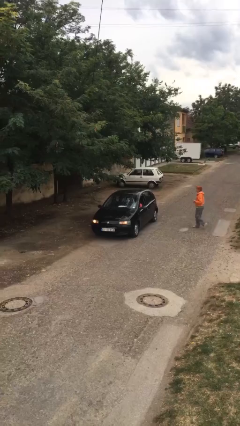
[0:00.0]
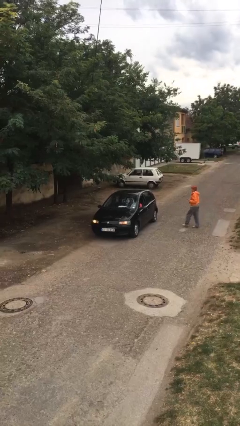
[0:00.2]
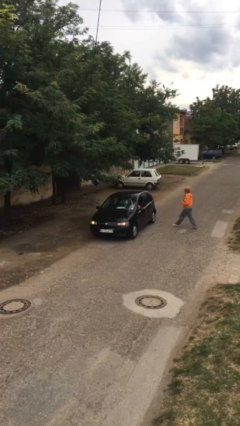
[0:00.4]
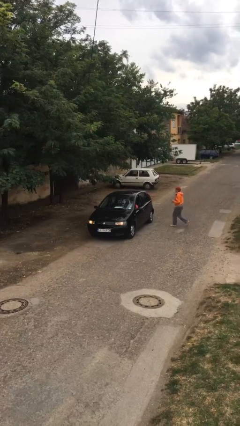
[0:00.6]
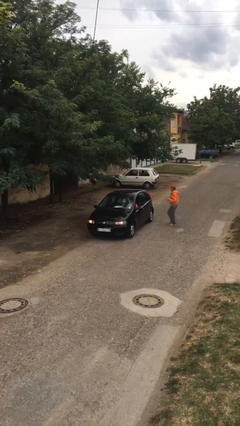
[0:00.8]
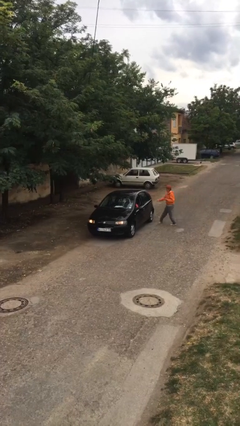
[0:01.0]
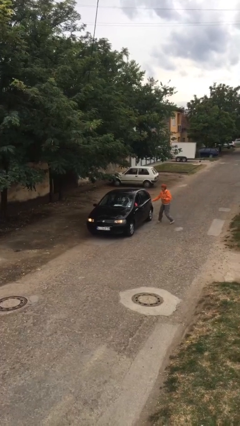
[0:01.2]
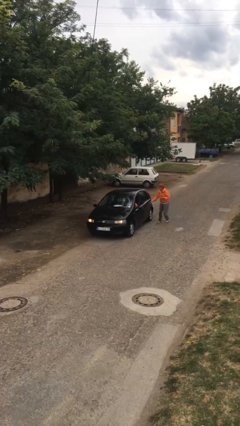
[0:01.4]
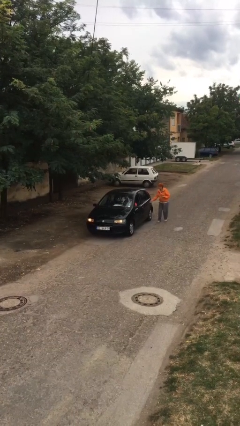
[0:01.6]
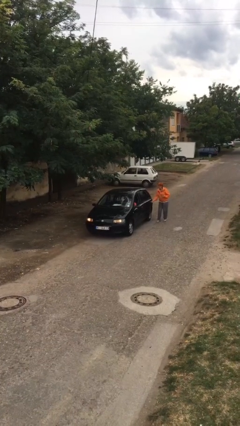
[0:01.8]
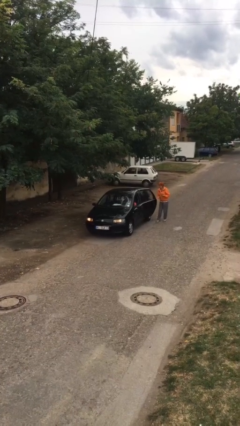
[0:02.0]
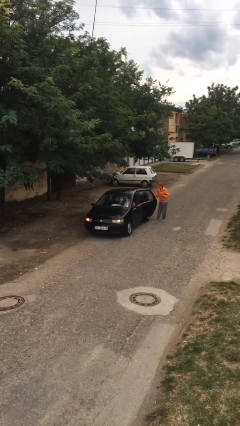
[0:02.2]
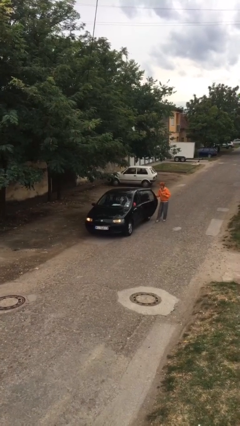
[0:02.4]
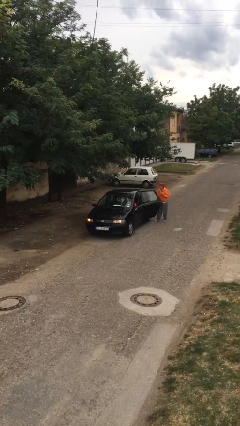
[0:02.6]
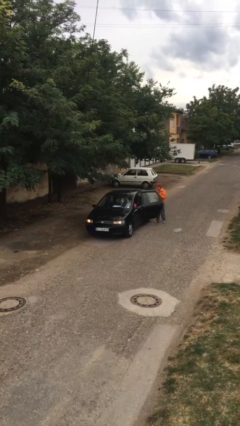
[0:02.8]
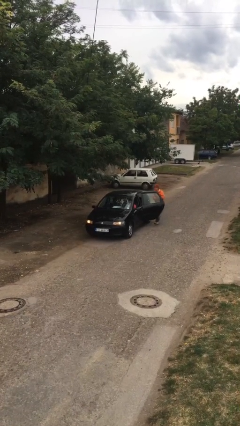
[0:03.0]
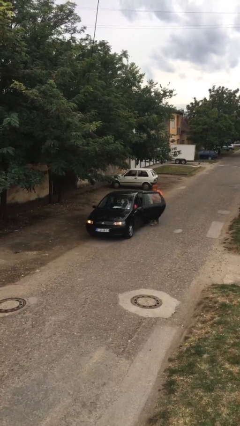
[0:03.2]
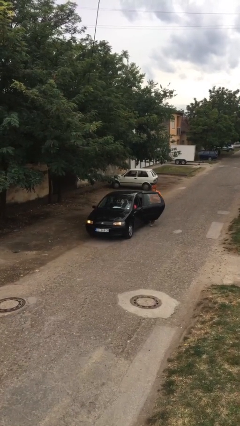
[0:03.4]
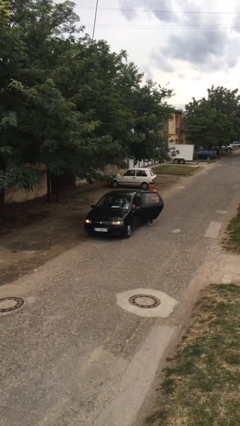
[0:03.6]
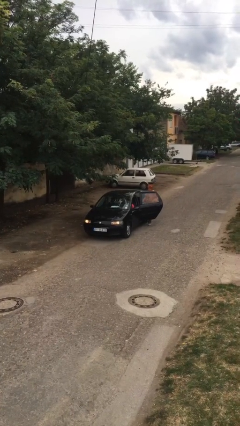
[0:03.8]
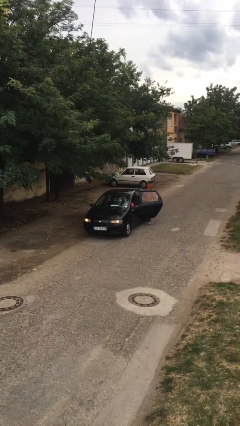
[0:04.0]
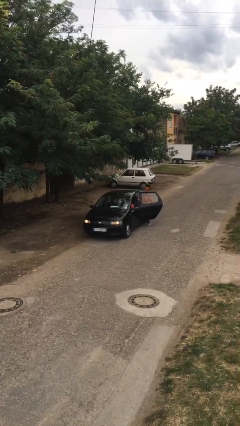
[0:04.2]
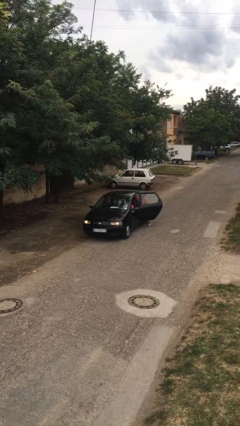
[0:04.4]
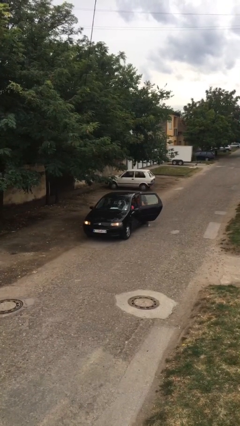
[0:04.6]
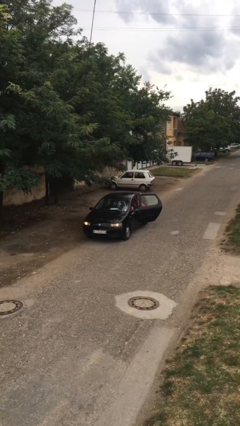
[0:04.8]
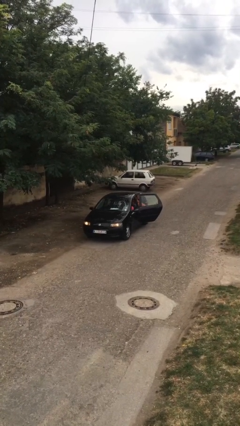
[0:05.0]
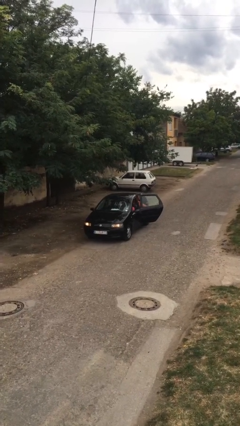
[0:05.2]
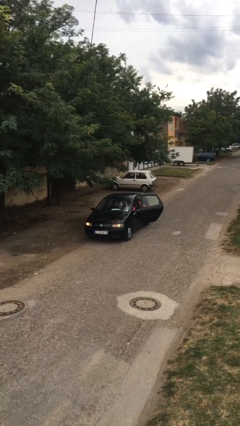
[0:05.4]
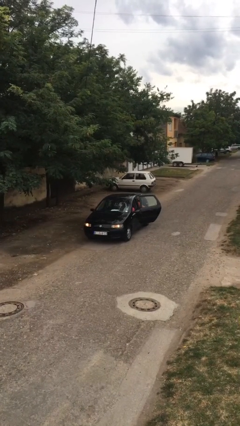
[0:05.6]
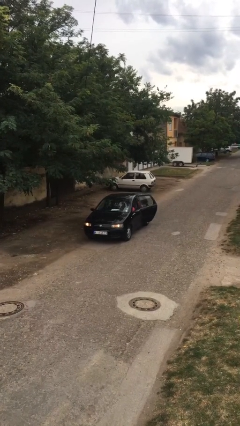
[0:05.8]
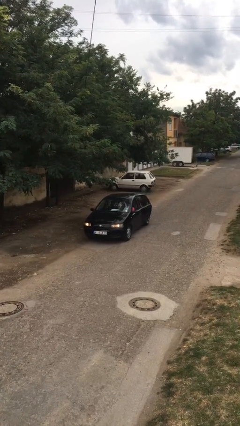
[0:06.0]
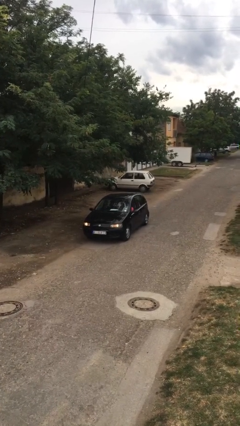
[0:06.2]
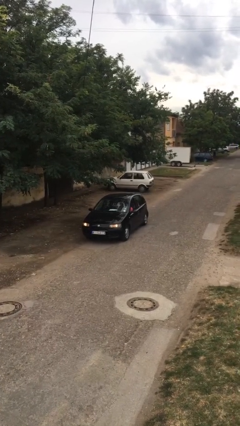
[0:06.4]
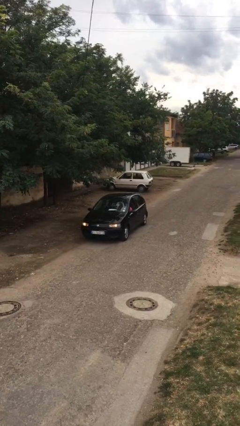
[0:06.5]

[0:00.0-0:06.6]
car picks up person

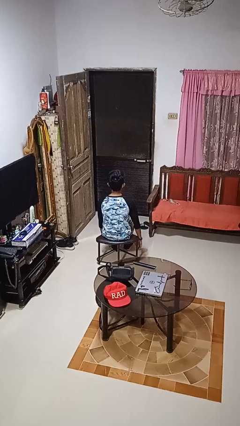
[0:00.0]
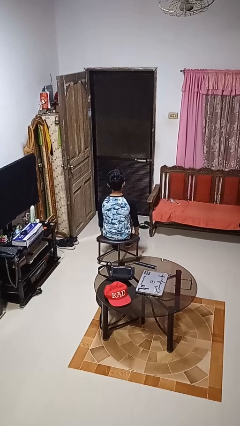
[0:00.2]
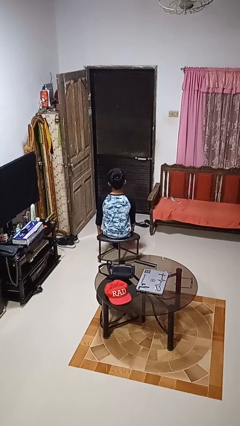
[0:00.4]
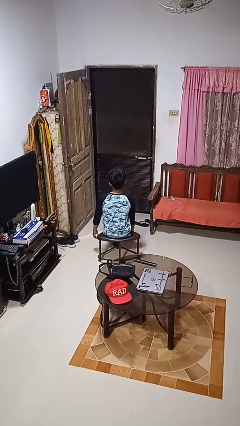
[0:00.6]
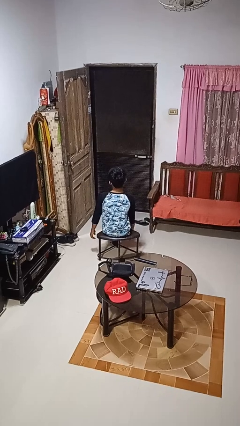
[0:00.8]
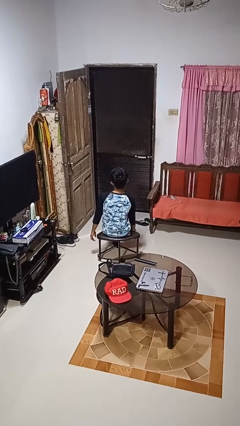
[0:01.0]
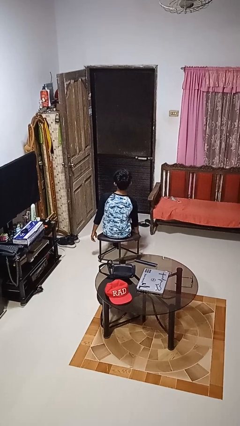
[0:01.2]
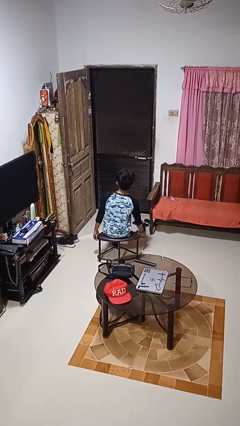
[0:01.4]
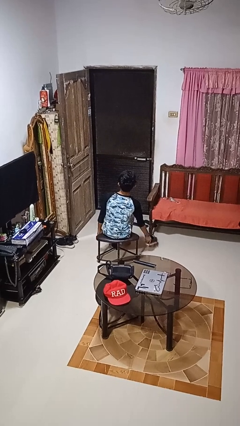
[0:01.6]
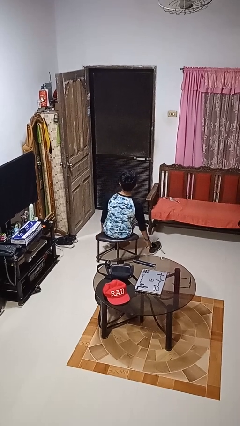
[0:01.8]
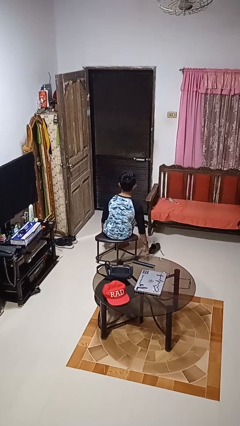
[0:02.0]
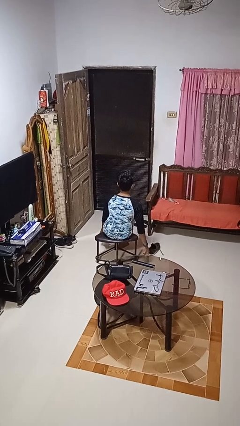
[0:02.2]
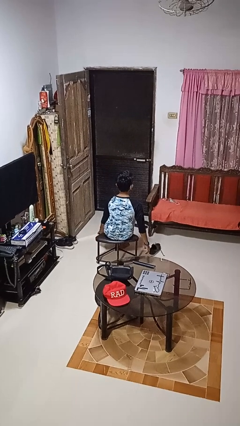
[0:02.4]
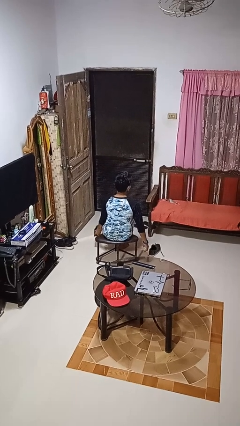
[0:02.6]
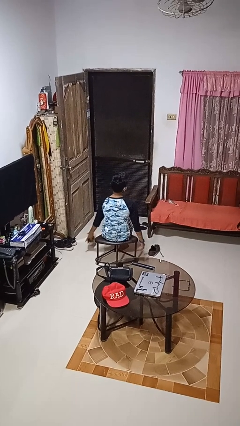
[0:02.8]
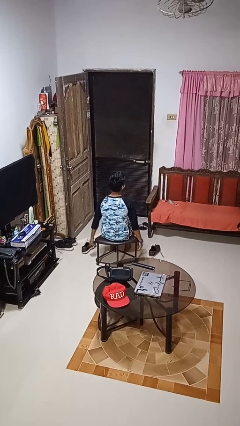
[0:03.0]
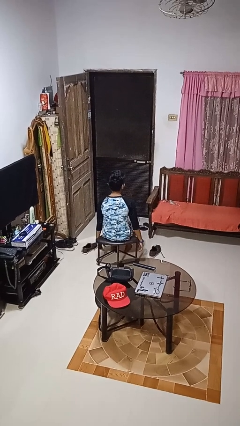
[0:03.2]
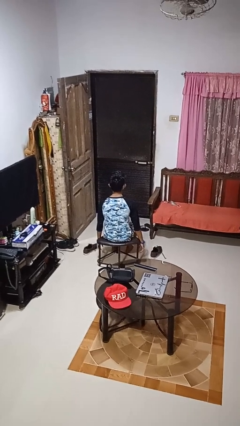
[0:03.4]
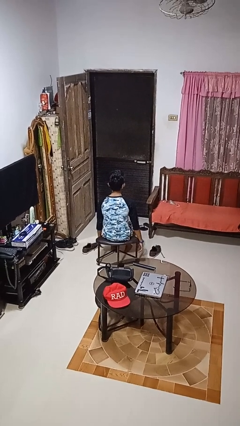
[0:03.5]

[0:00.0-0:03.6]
person takes off shoes

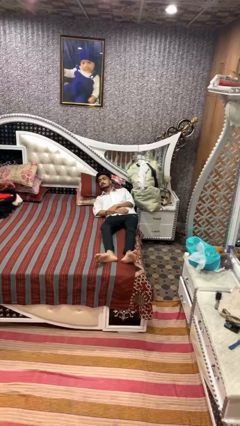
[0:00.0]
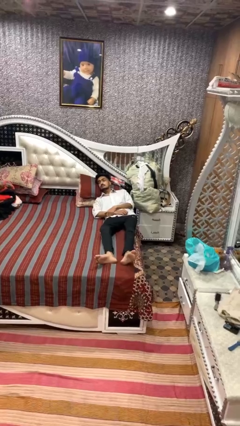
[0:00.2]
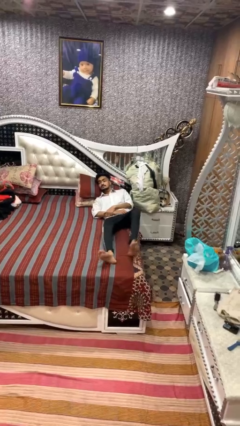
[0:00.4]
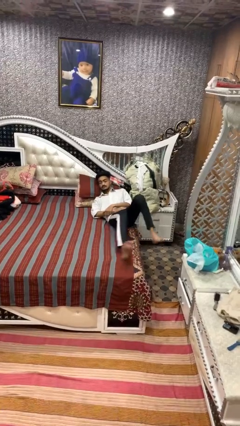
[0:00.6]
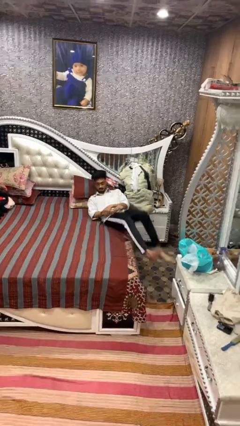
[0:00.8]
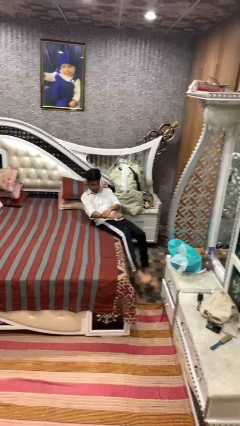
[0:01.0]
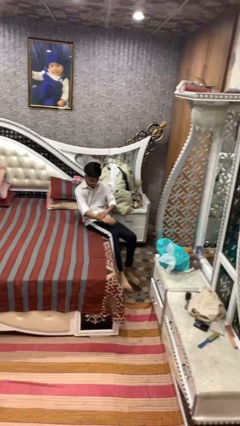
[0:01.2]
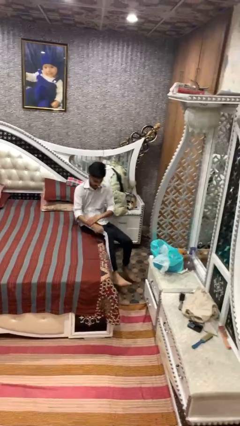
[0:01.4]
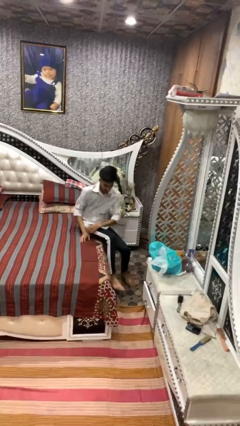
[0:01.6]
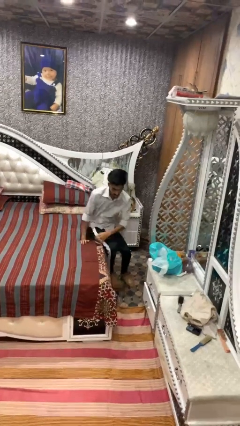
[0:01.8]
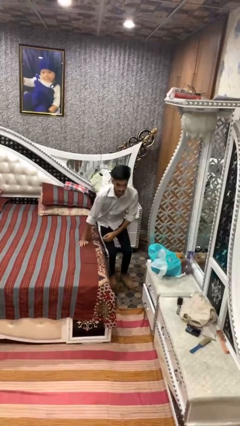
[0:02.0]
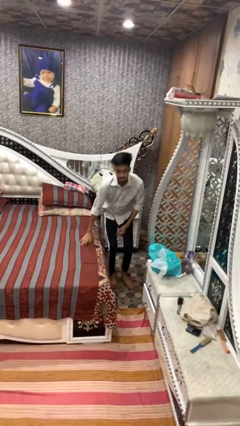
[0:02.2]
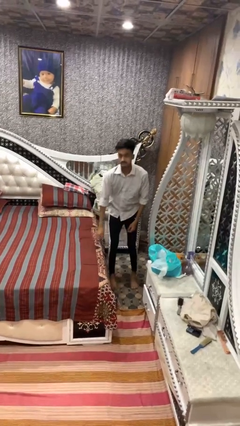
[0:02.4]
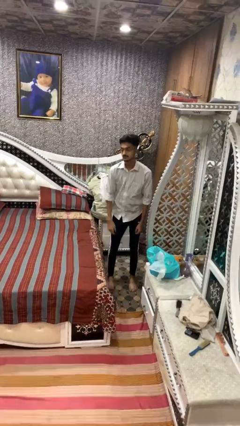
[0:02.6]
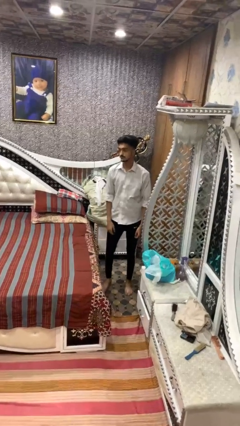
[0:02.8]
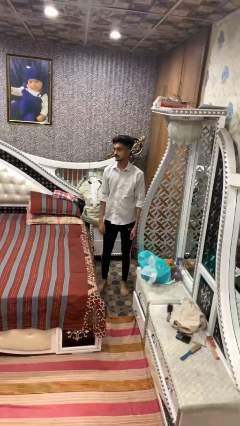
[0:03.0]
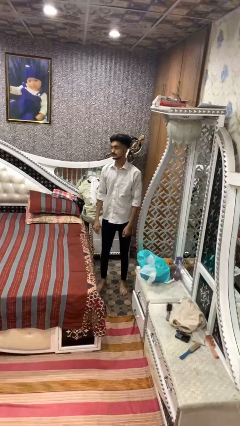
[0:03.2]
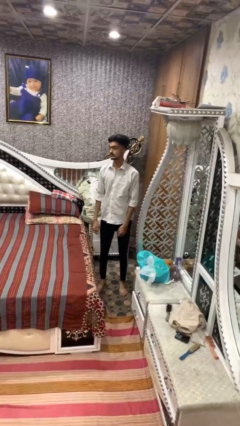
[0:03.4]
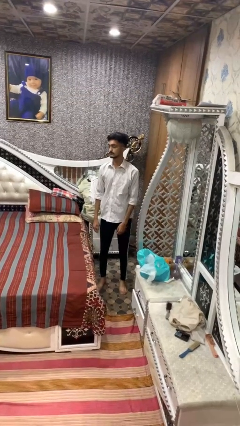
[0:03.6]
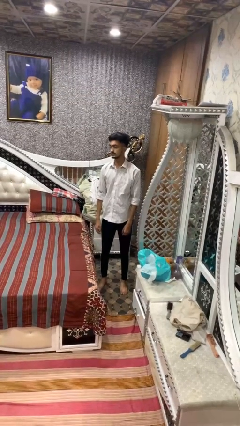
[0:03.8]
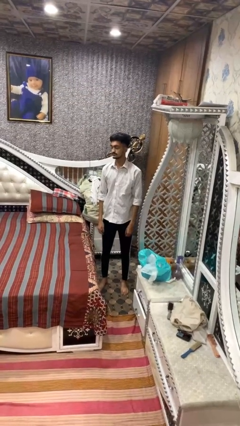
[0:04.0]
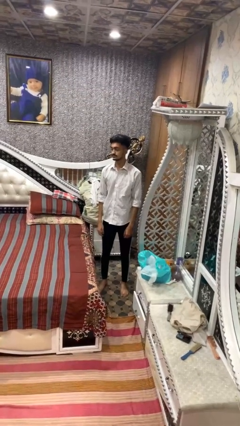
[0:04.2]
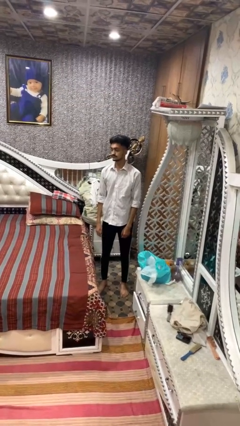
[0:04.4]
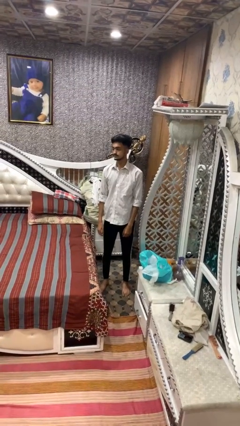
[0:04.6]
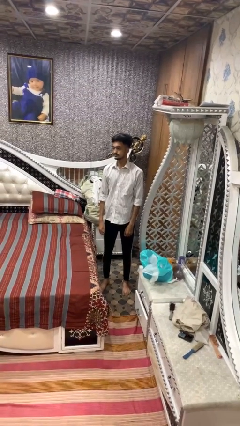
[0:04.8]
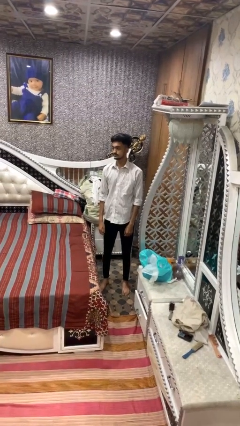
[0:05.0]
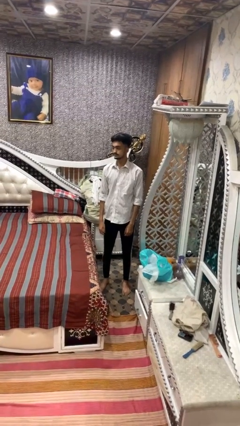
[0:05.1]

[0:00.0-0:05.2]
person stands up

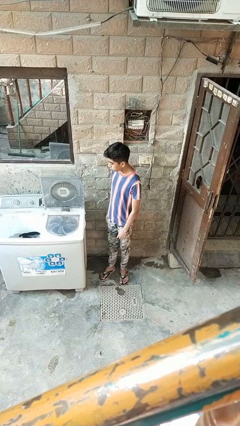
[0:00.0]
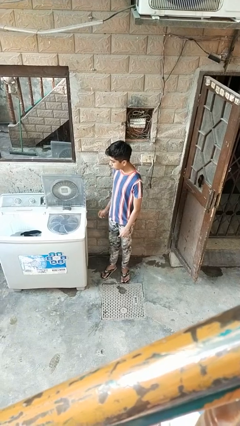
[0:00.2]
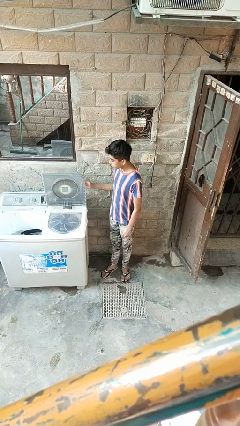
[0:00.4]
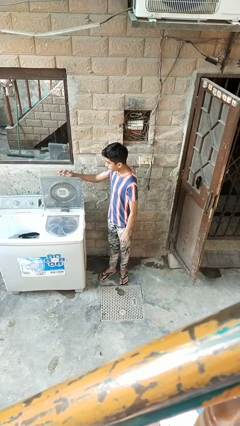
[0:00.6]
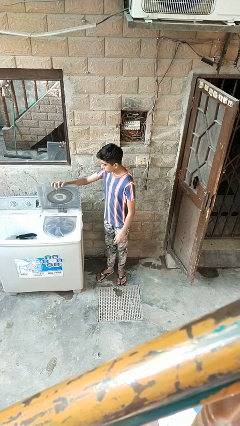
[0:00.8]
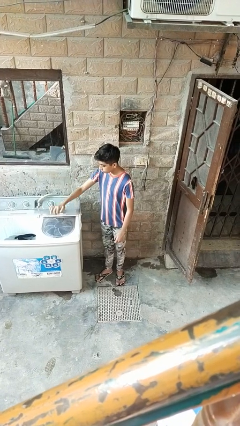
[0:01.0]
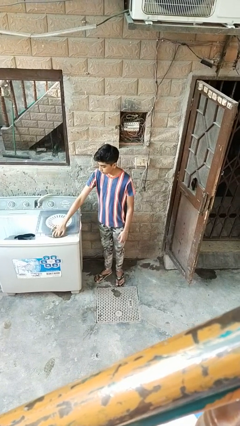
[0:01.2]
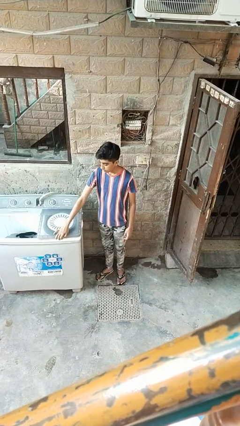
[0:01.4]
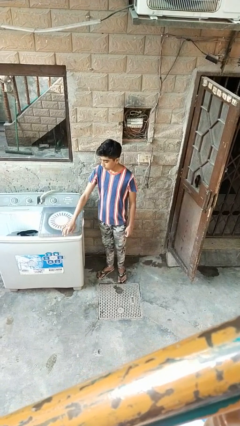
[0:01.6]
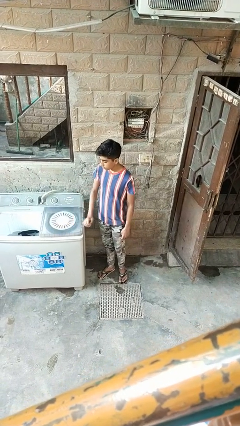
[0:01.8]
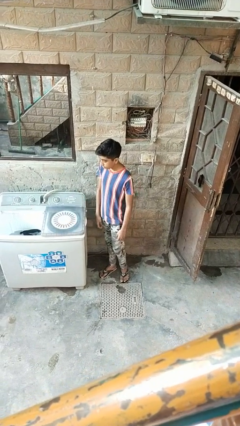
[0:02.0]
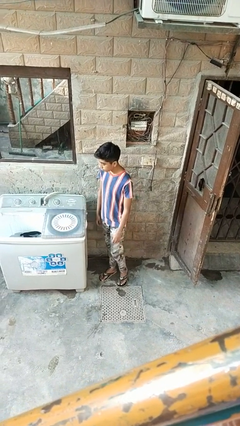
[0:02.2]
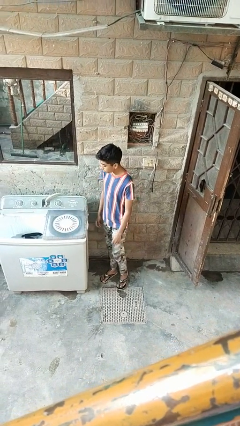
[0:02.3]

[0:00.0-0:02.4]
person closes clothes washer
